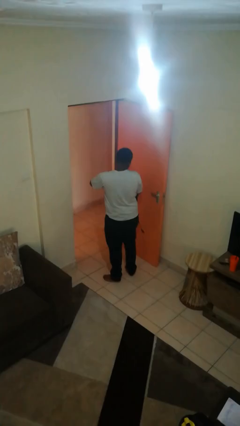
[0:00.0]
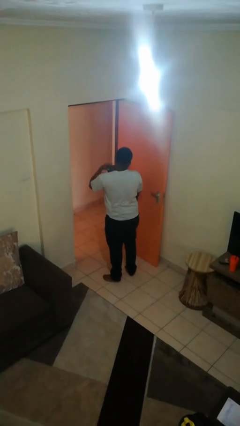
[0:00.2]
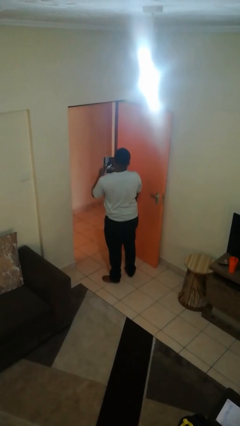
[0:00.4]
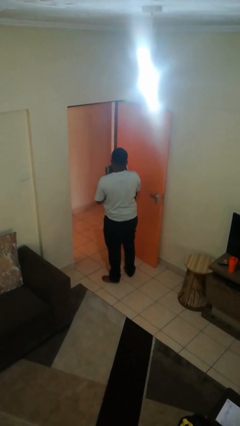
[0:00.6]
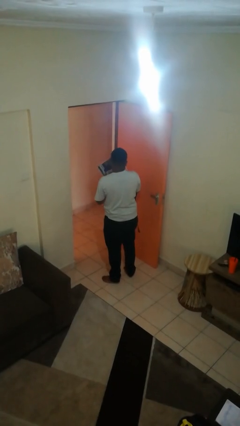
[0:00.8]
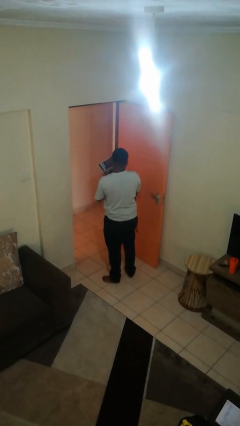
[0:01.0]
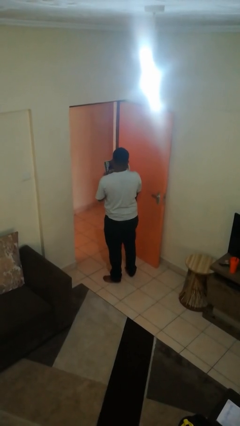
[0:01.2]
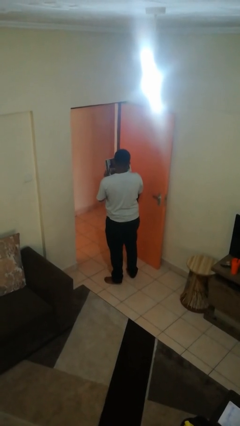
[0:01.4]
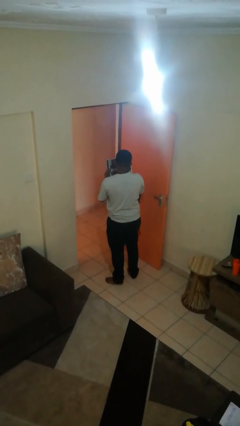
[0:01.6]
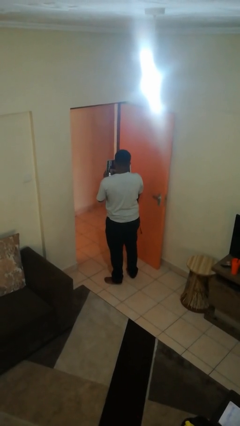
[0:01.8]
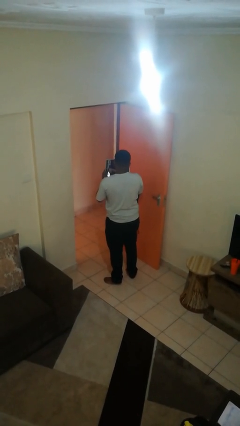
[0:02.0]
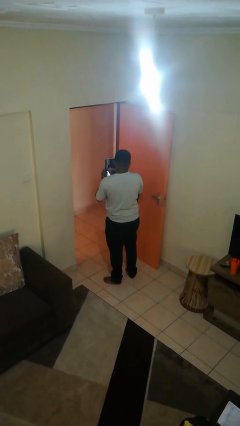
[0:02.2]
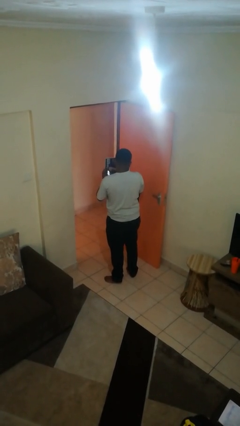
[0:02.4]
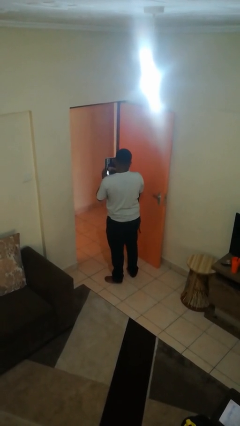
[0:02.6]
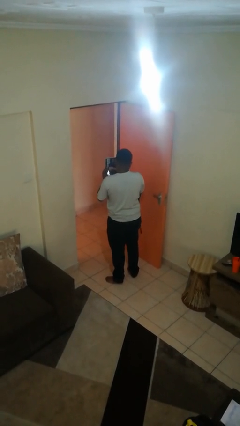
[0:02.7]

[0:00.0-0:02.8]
person takes object from backpack

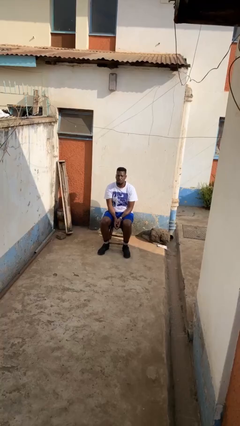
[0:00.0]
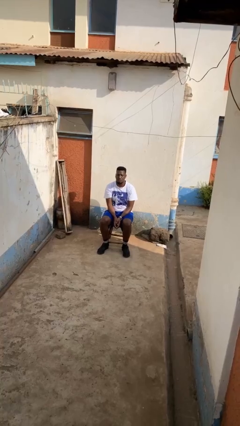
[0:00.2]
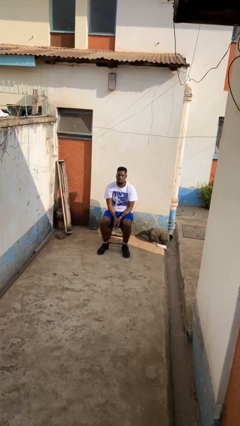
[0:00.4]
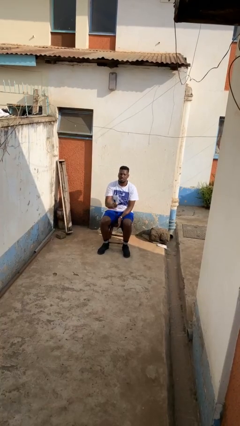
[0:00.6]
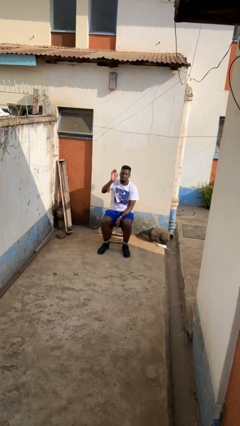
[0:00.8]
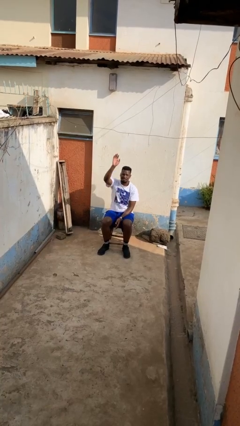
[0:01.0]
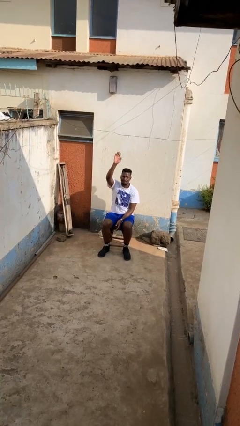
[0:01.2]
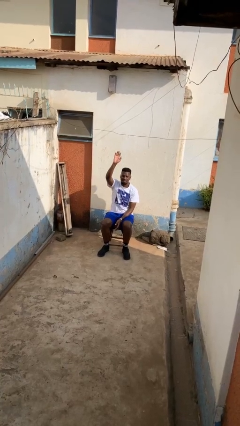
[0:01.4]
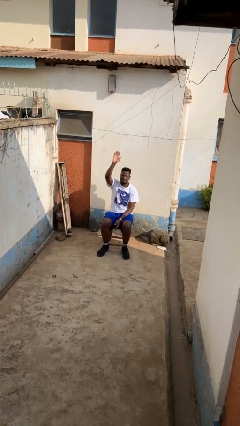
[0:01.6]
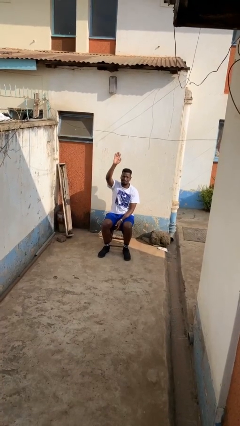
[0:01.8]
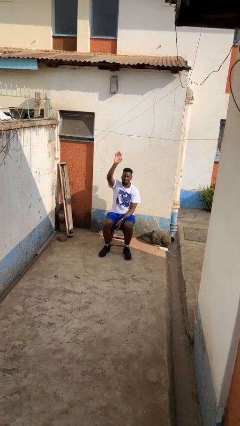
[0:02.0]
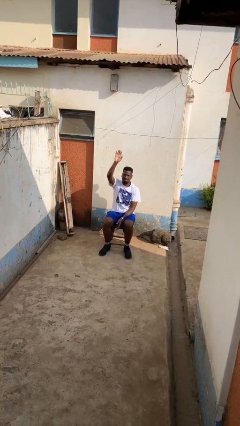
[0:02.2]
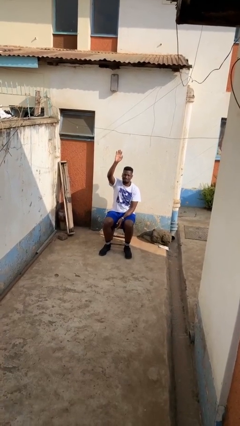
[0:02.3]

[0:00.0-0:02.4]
person gestures raise hand

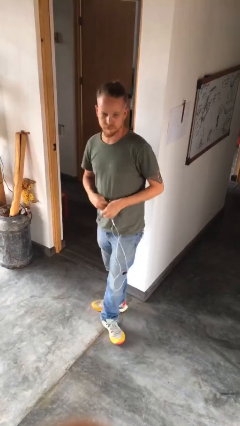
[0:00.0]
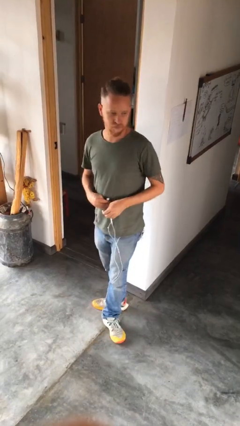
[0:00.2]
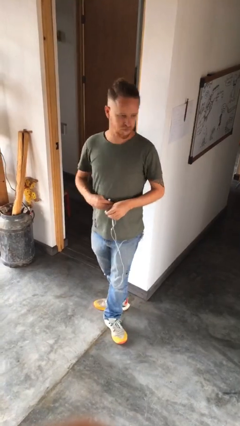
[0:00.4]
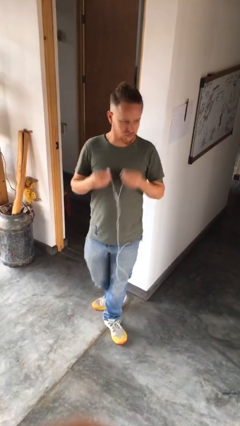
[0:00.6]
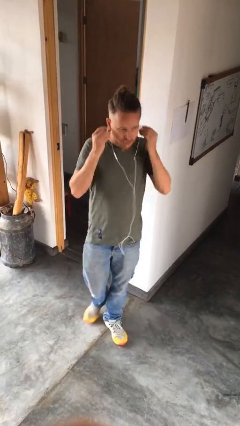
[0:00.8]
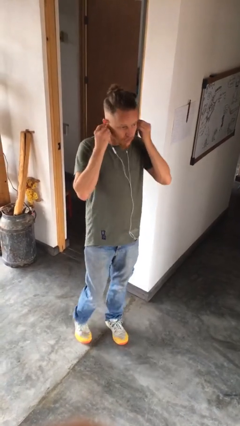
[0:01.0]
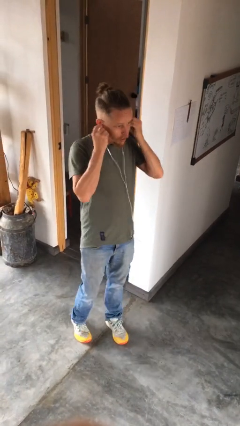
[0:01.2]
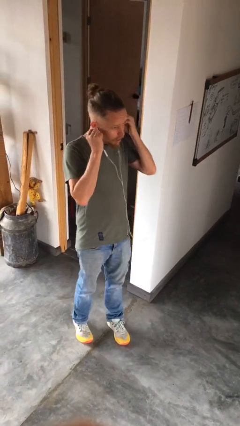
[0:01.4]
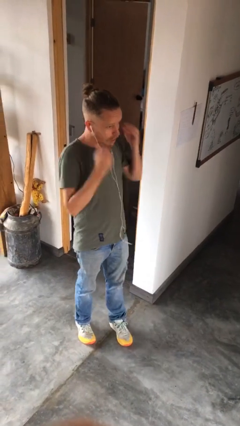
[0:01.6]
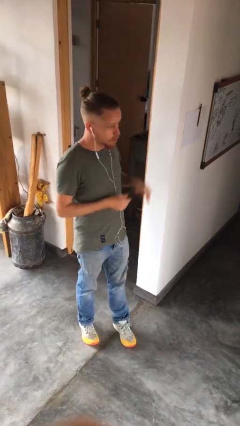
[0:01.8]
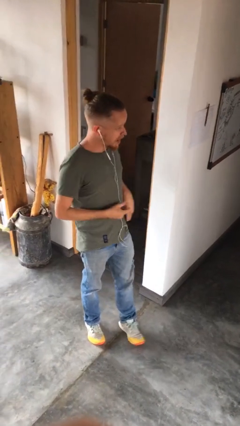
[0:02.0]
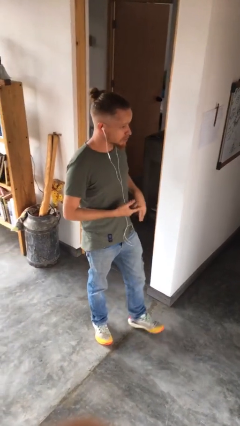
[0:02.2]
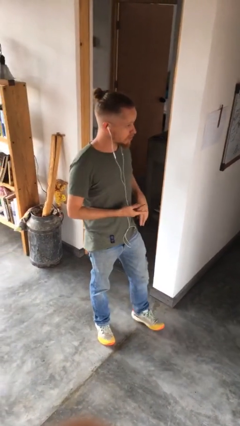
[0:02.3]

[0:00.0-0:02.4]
person puts on headphones

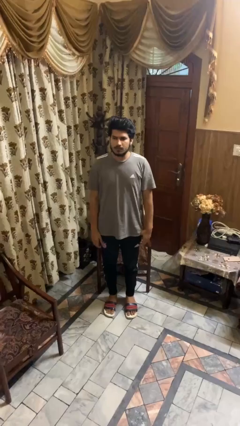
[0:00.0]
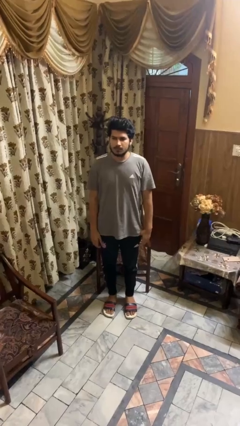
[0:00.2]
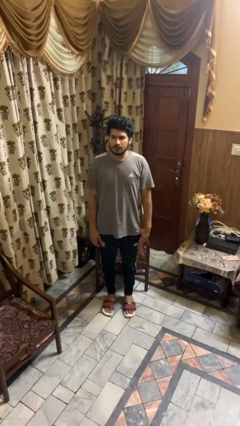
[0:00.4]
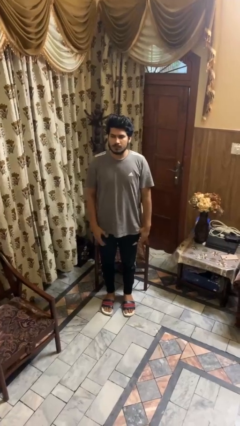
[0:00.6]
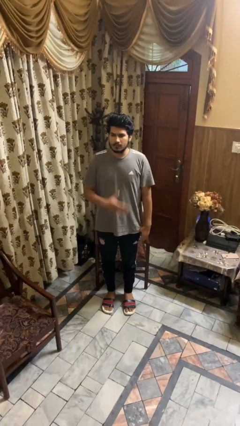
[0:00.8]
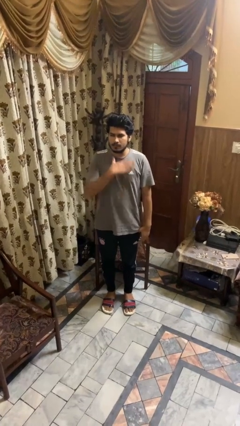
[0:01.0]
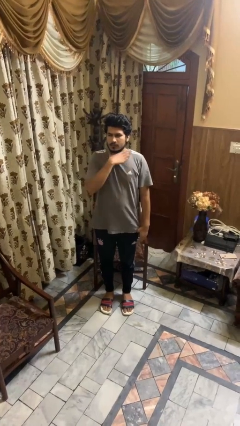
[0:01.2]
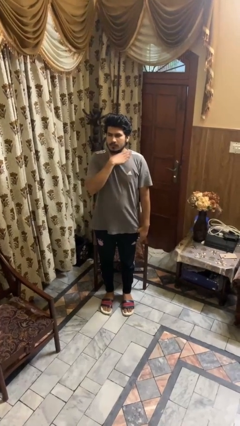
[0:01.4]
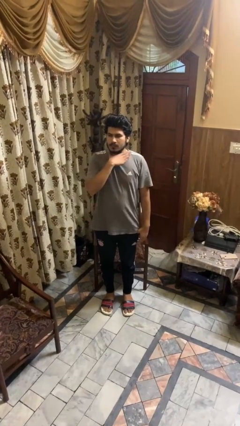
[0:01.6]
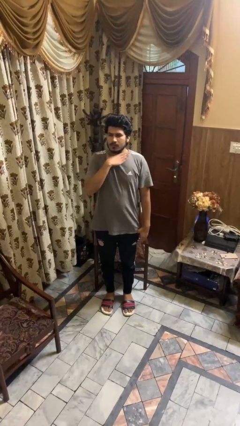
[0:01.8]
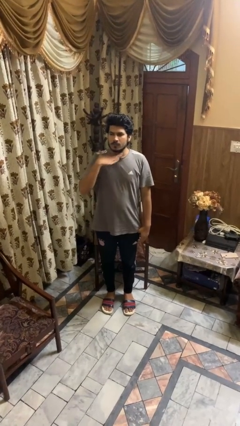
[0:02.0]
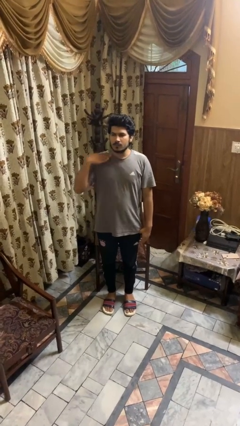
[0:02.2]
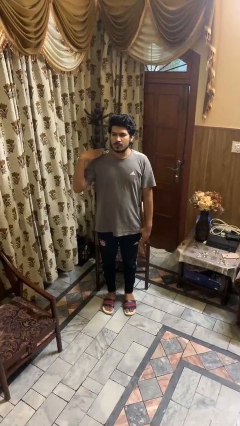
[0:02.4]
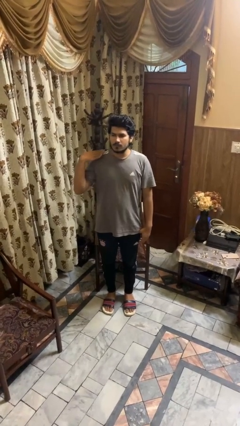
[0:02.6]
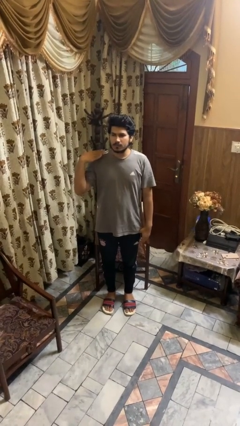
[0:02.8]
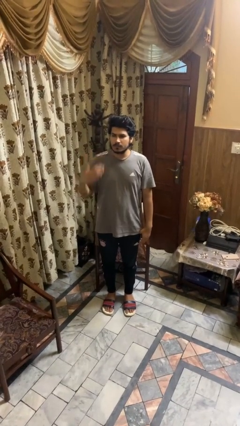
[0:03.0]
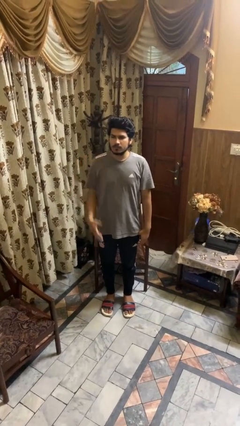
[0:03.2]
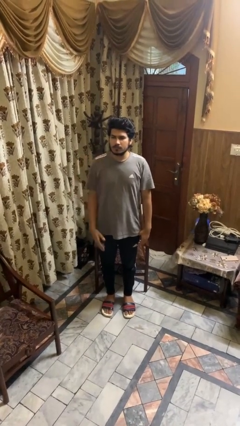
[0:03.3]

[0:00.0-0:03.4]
person gestures cut

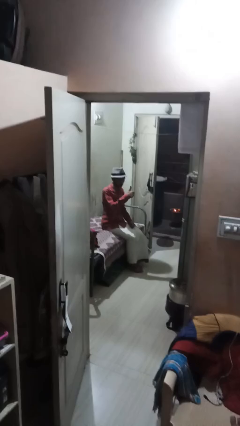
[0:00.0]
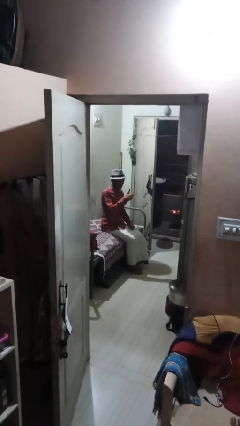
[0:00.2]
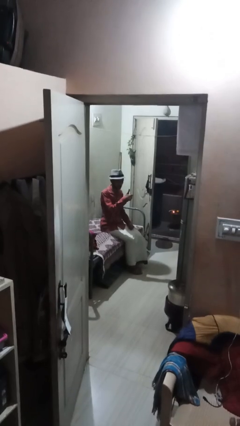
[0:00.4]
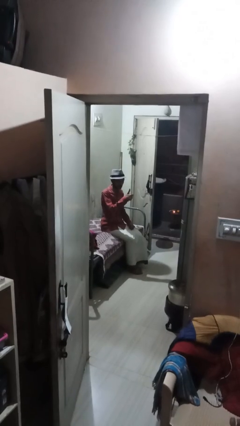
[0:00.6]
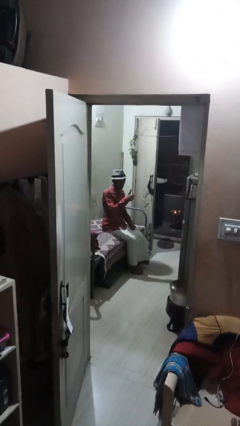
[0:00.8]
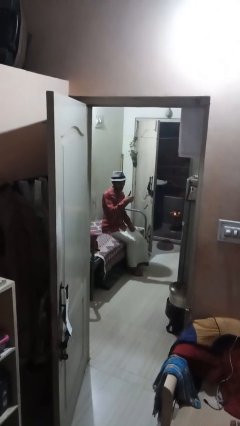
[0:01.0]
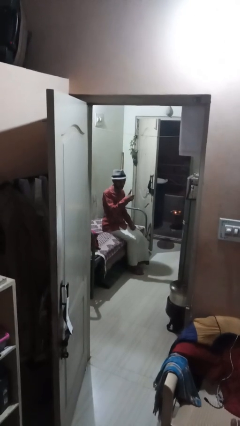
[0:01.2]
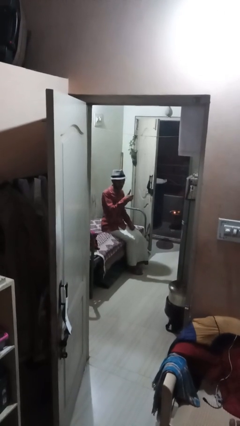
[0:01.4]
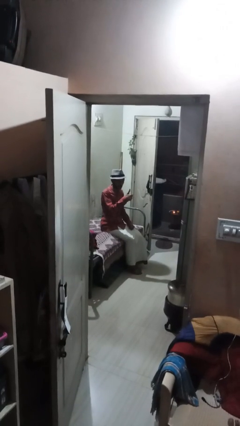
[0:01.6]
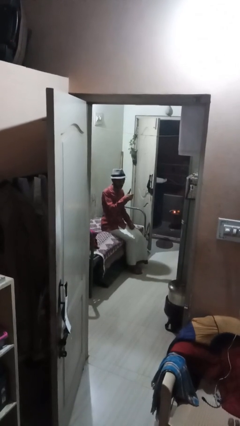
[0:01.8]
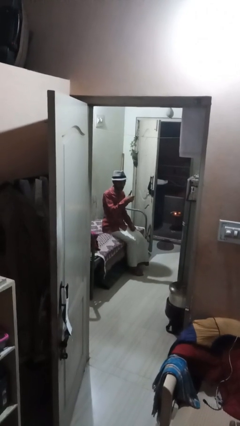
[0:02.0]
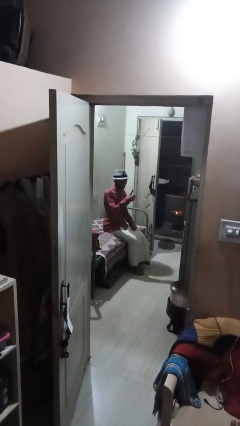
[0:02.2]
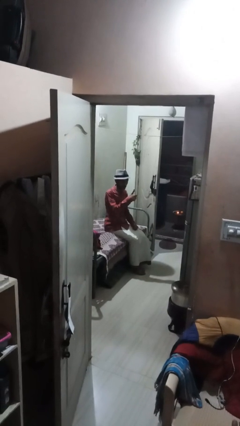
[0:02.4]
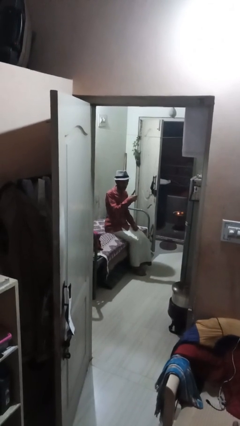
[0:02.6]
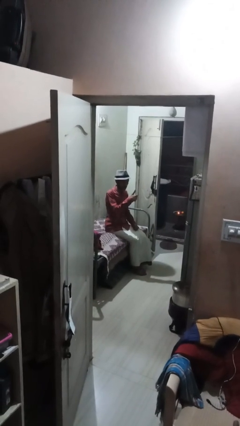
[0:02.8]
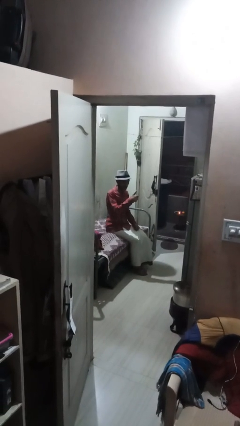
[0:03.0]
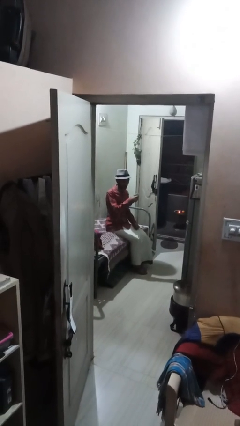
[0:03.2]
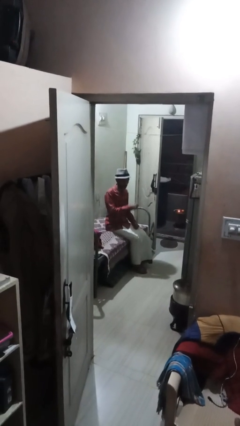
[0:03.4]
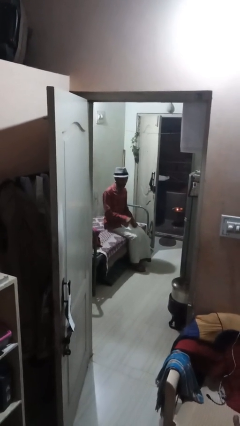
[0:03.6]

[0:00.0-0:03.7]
person gestures thumbs up

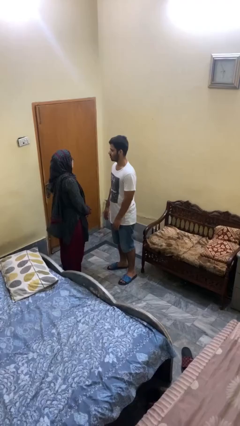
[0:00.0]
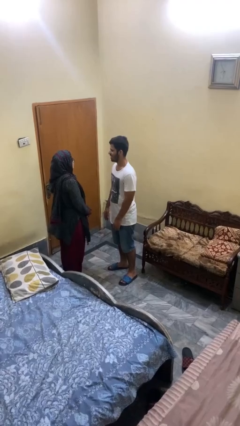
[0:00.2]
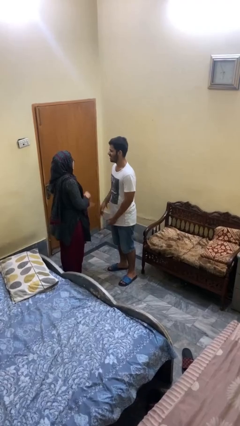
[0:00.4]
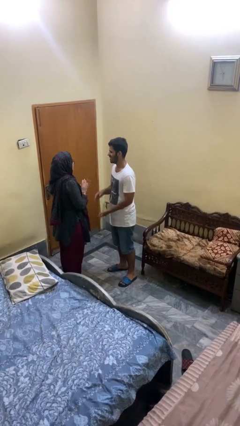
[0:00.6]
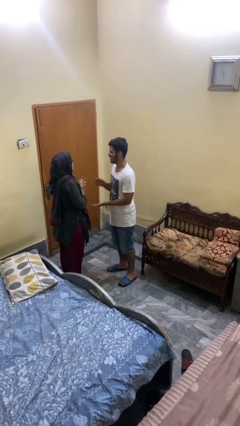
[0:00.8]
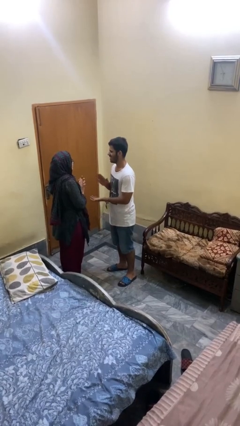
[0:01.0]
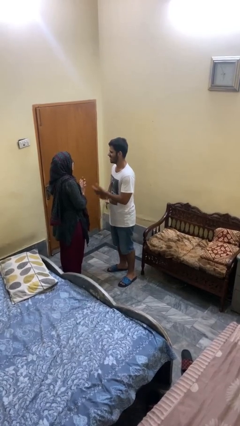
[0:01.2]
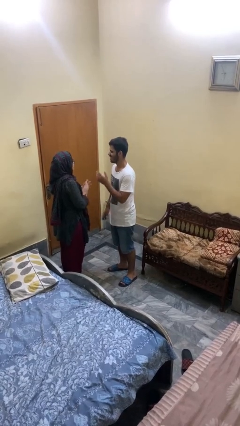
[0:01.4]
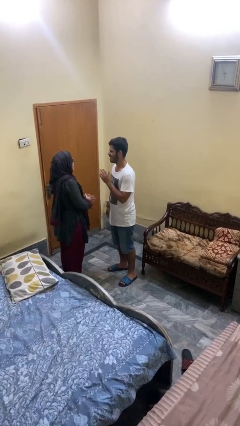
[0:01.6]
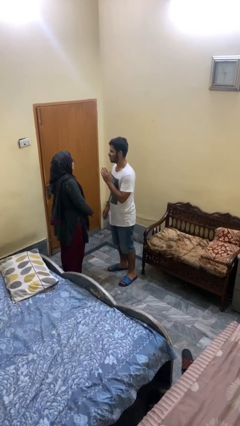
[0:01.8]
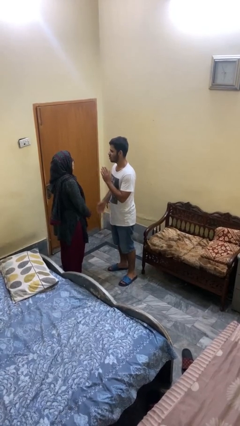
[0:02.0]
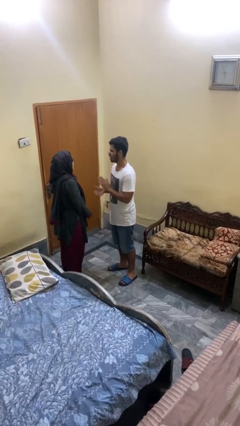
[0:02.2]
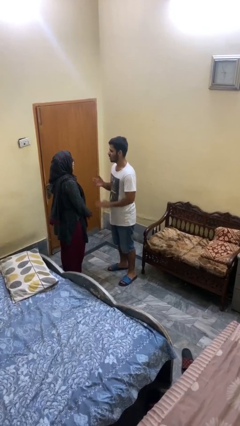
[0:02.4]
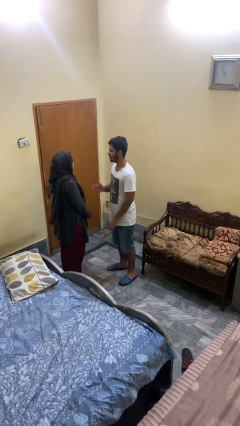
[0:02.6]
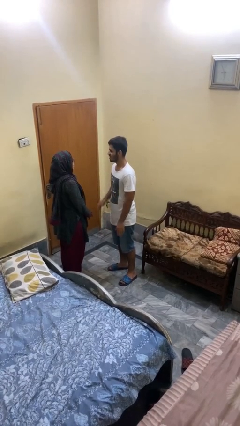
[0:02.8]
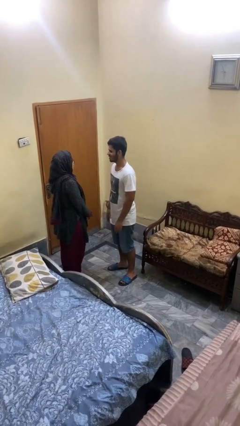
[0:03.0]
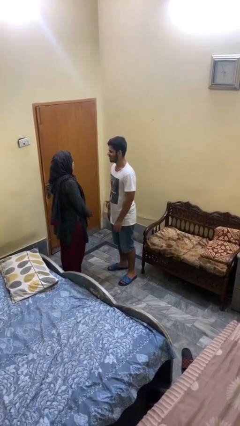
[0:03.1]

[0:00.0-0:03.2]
person laughs with person
